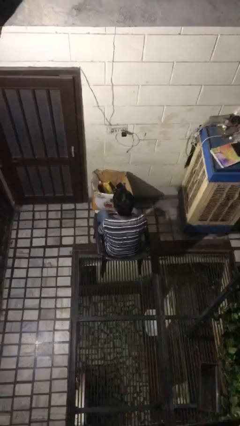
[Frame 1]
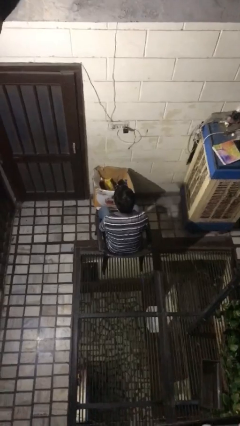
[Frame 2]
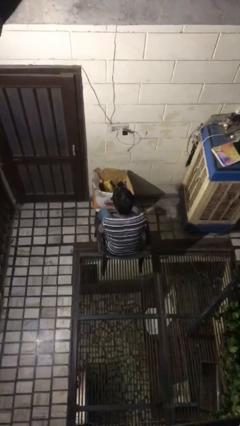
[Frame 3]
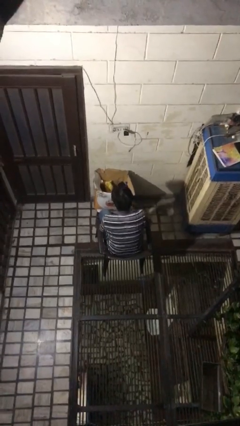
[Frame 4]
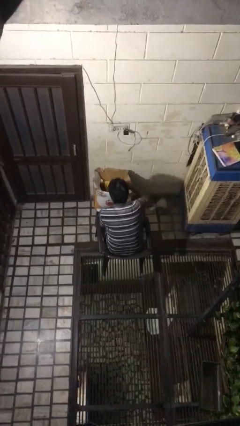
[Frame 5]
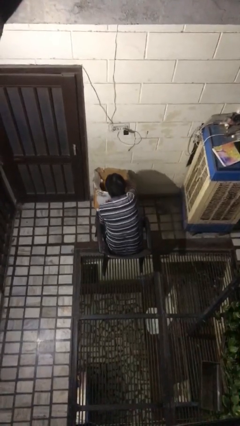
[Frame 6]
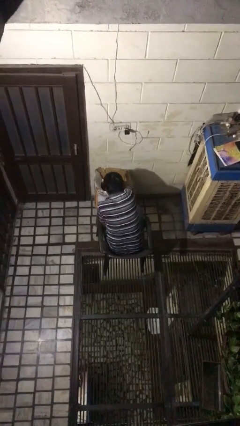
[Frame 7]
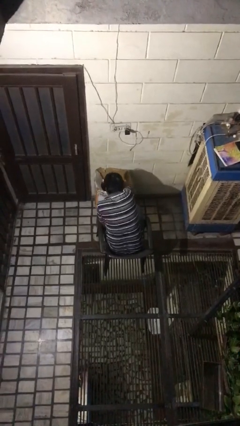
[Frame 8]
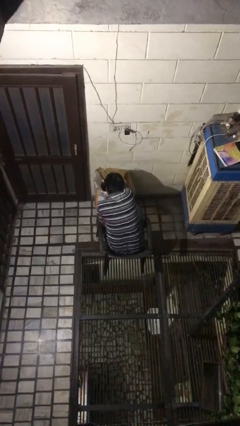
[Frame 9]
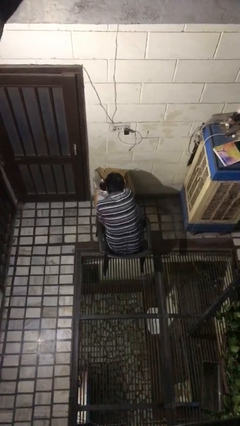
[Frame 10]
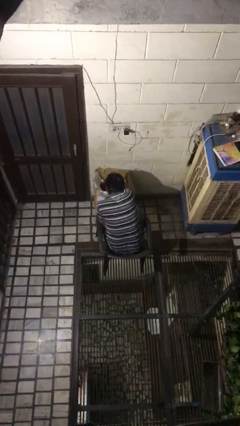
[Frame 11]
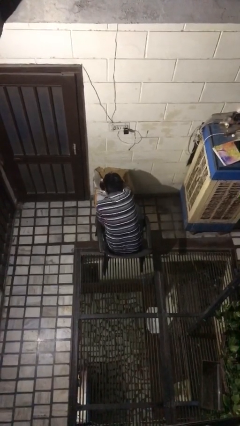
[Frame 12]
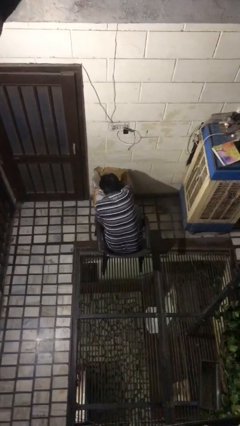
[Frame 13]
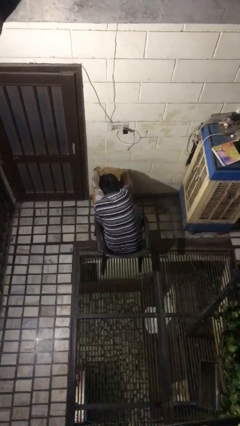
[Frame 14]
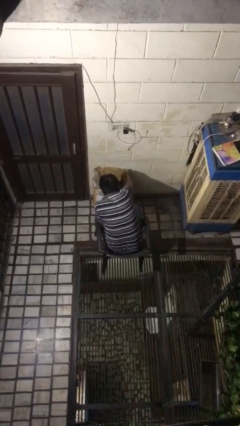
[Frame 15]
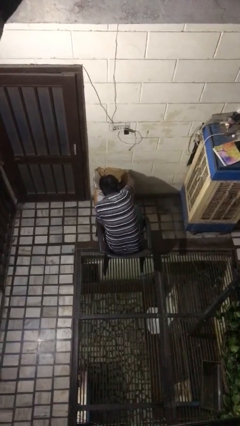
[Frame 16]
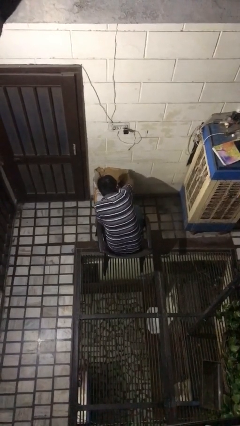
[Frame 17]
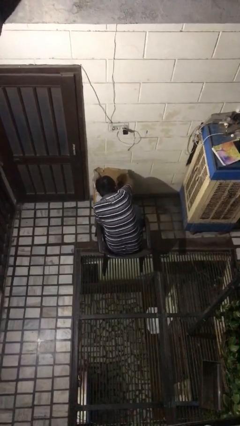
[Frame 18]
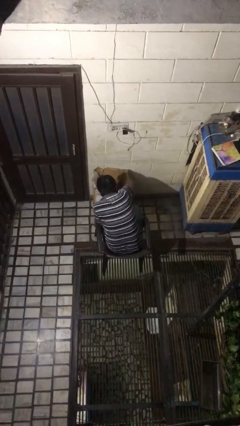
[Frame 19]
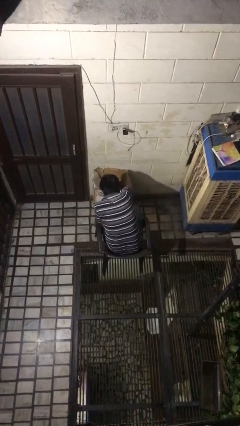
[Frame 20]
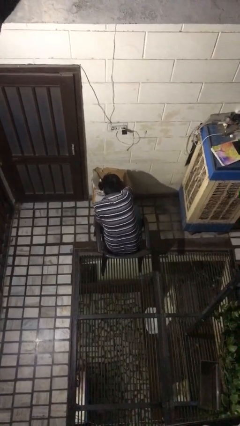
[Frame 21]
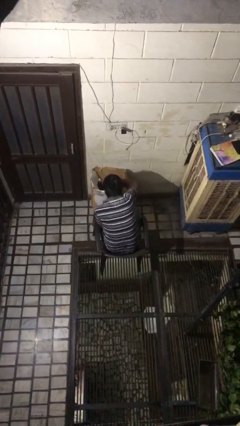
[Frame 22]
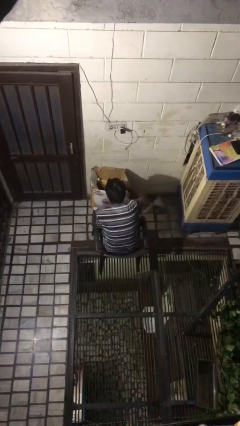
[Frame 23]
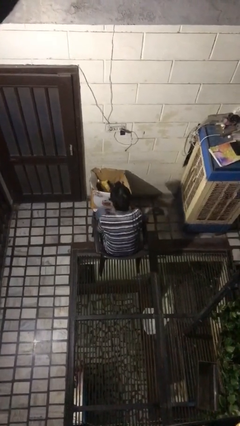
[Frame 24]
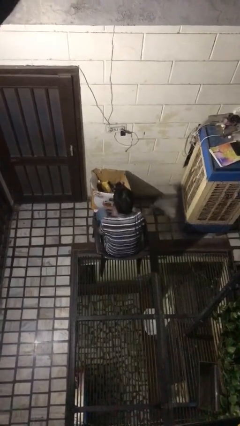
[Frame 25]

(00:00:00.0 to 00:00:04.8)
person searches in box

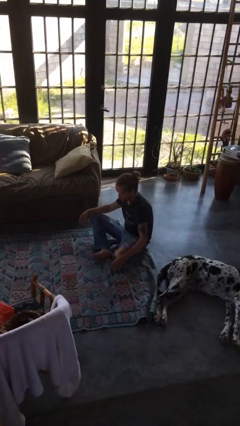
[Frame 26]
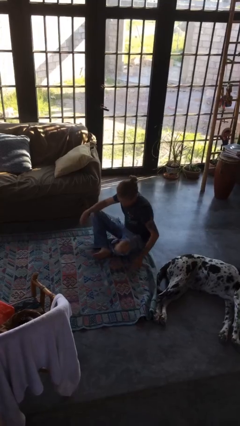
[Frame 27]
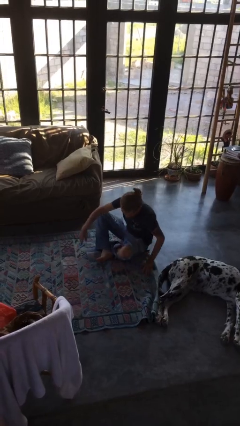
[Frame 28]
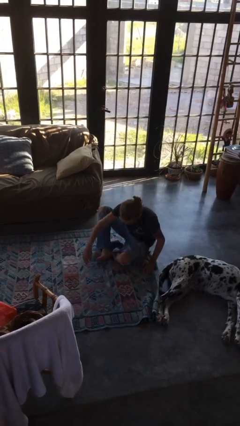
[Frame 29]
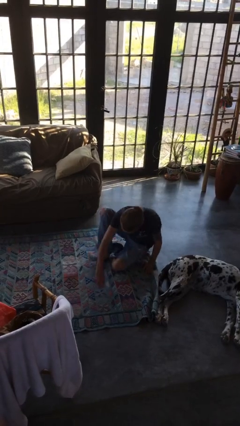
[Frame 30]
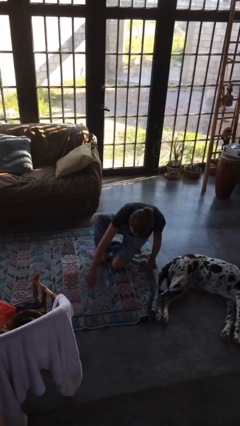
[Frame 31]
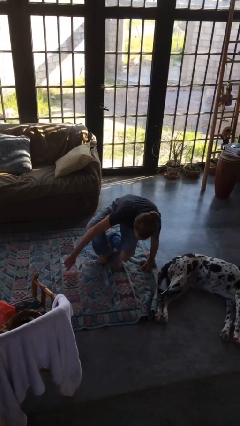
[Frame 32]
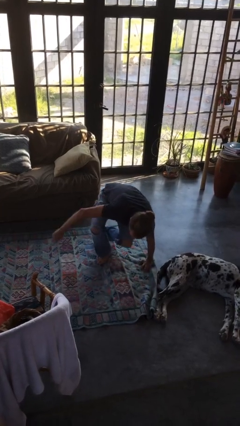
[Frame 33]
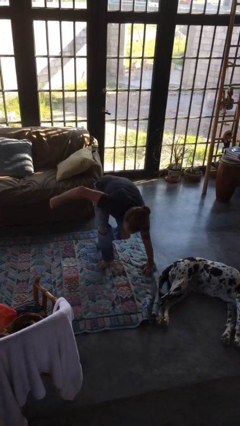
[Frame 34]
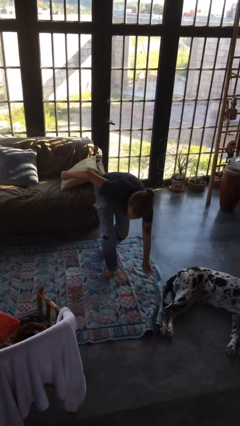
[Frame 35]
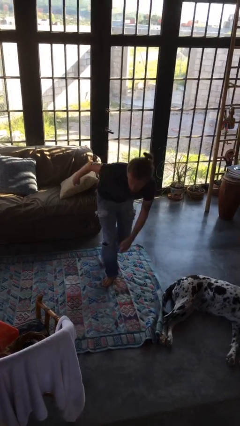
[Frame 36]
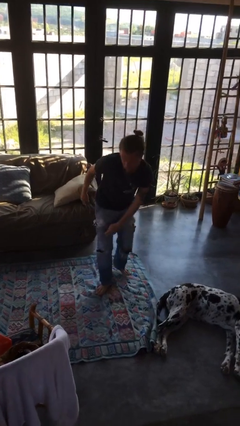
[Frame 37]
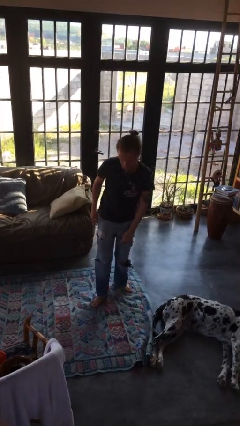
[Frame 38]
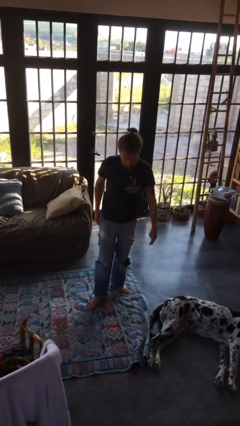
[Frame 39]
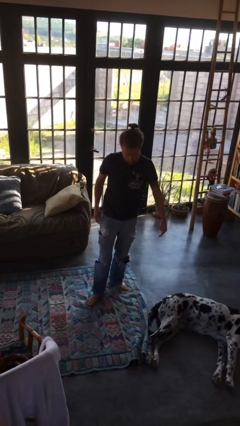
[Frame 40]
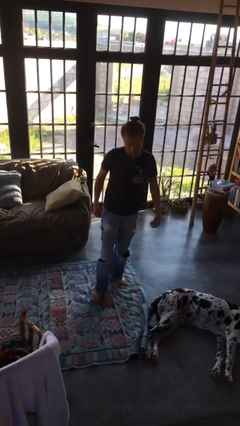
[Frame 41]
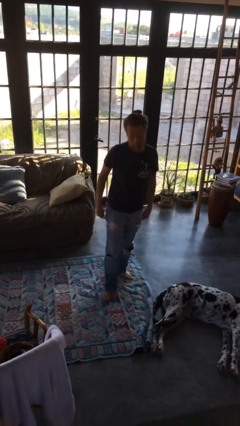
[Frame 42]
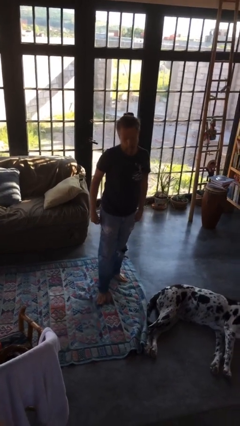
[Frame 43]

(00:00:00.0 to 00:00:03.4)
person stands up from floor

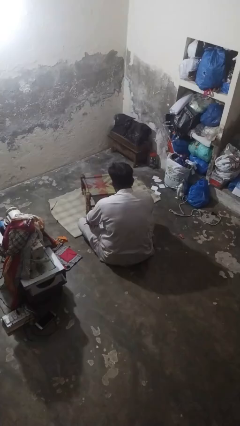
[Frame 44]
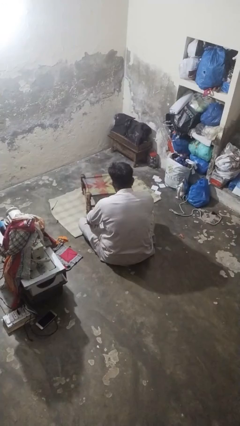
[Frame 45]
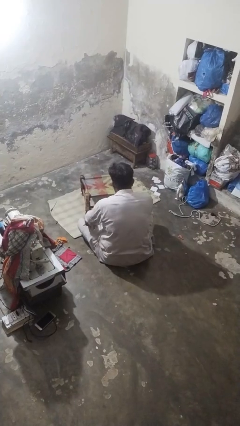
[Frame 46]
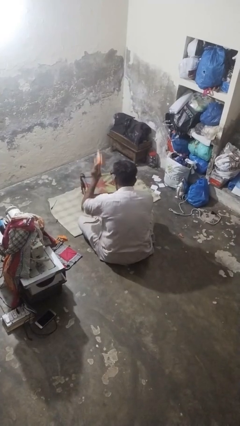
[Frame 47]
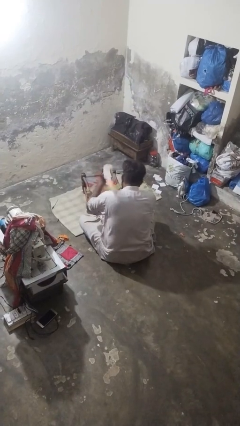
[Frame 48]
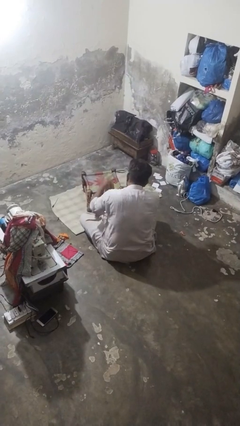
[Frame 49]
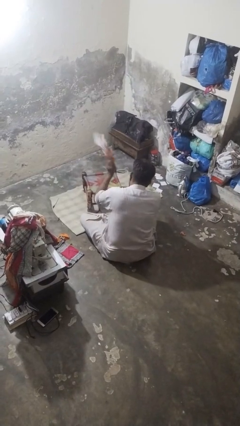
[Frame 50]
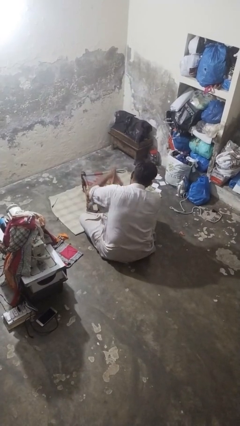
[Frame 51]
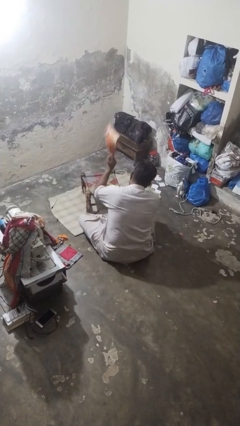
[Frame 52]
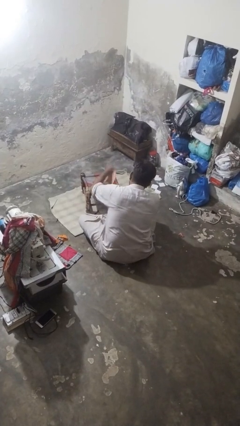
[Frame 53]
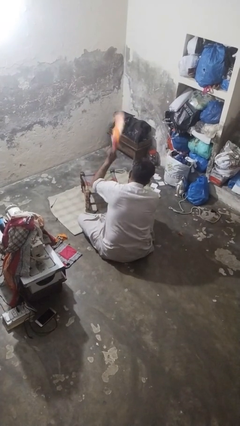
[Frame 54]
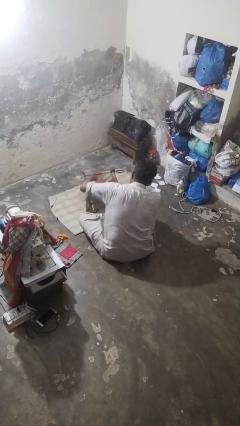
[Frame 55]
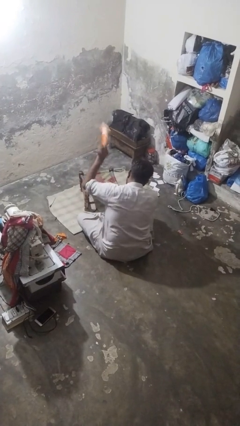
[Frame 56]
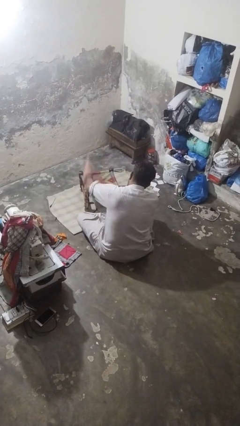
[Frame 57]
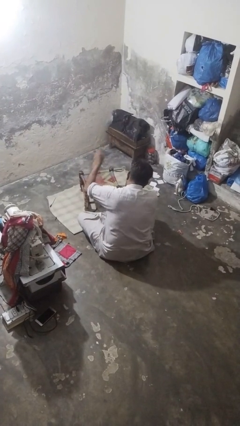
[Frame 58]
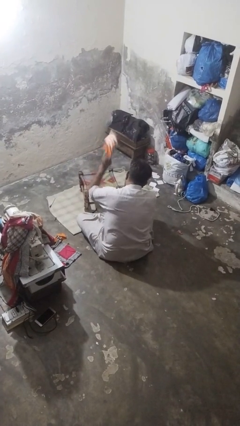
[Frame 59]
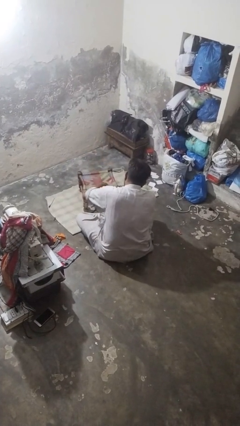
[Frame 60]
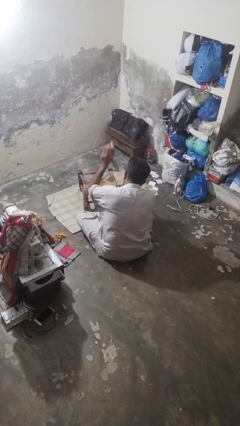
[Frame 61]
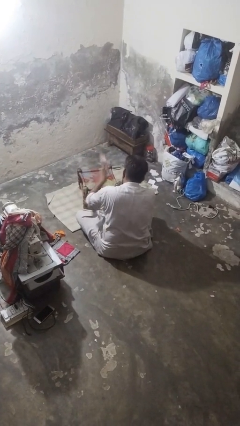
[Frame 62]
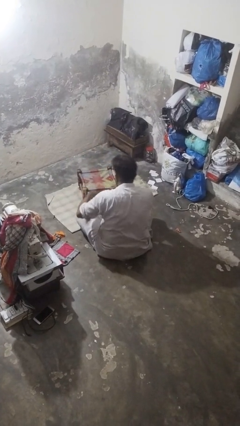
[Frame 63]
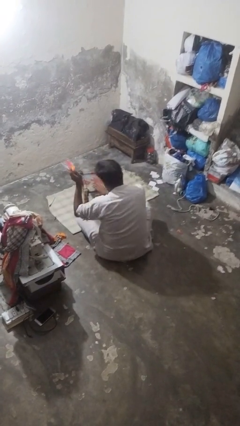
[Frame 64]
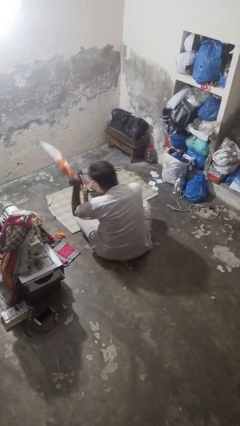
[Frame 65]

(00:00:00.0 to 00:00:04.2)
person dusts furniture

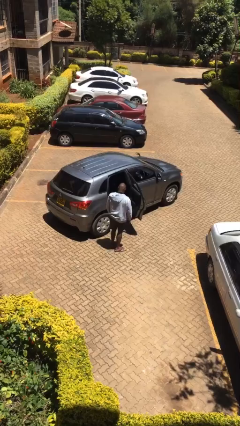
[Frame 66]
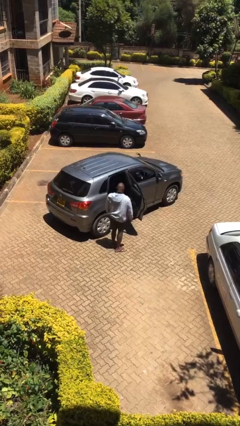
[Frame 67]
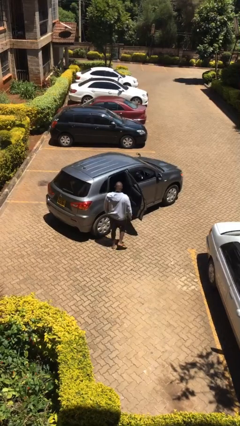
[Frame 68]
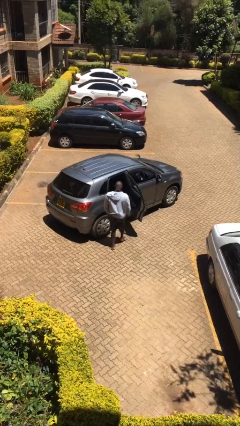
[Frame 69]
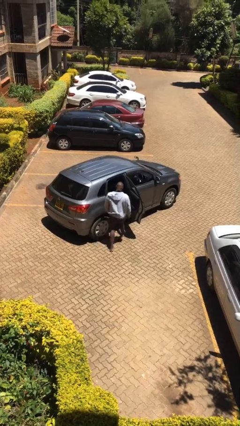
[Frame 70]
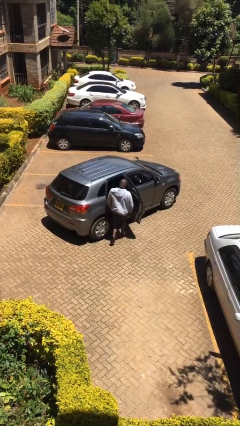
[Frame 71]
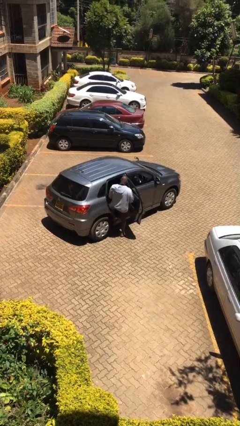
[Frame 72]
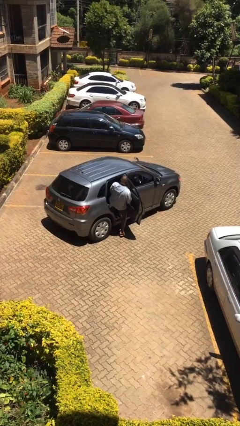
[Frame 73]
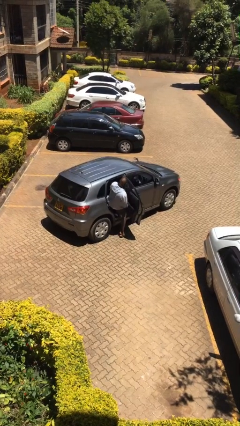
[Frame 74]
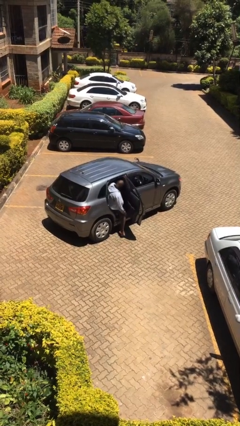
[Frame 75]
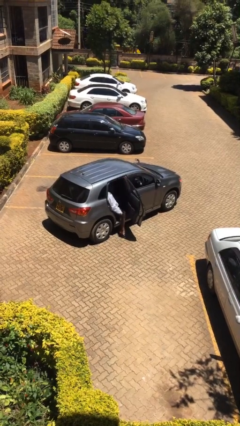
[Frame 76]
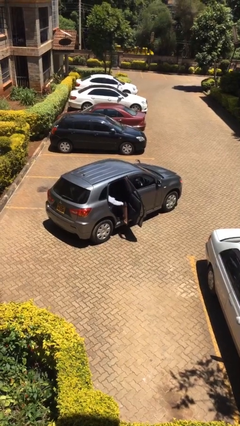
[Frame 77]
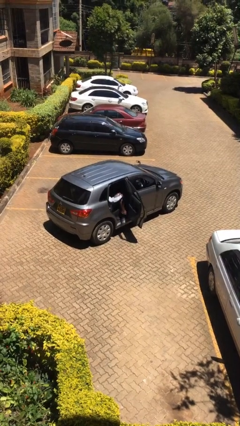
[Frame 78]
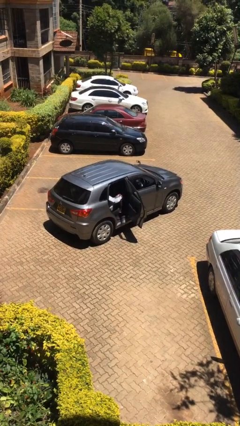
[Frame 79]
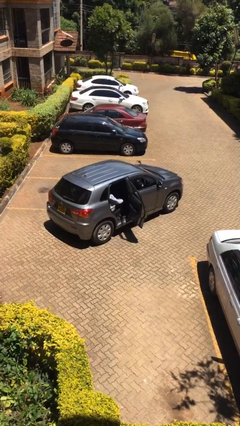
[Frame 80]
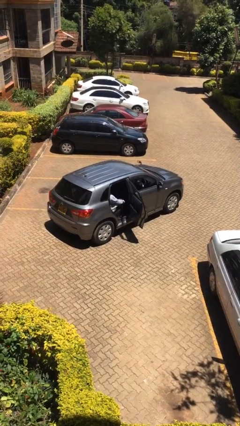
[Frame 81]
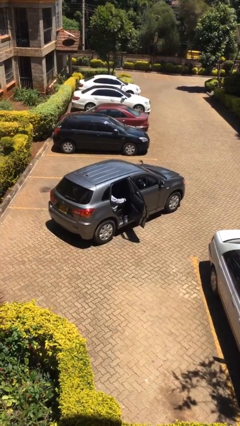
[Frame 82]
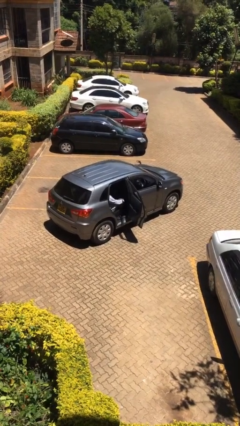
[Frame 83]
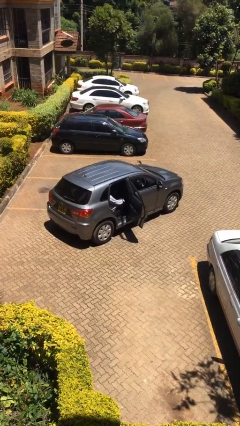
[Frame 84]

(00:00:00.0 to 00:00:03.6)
person enters car

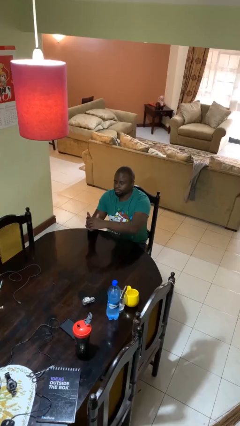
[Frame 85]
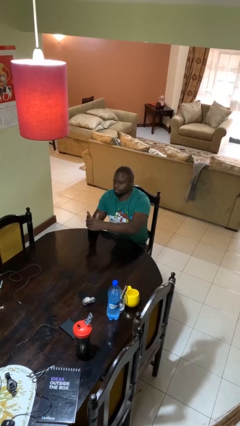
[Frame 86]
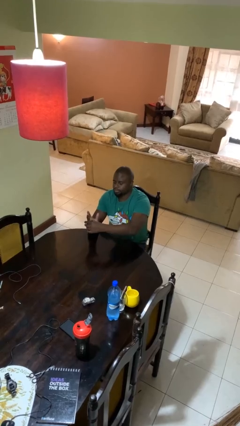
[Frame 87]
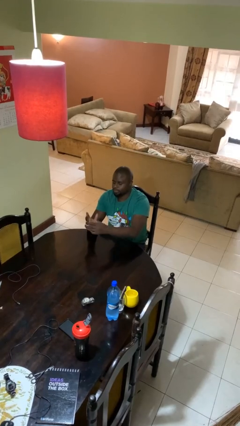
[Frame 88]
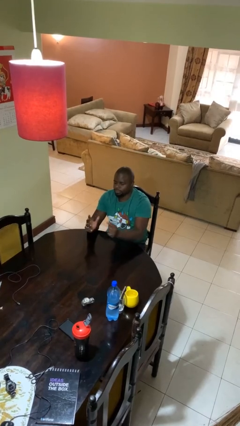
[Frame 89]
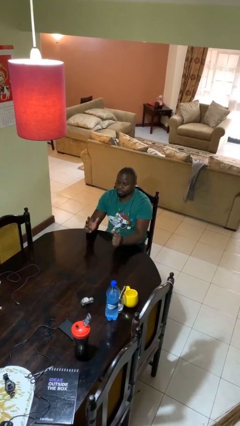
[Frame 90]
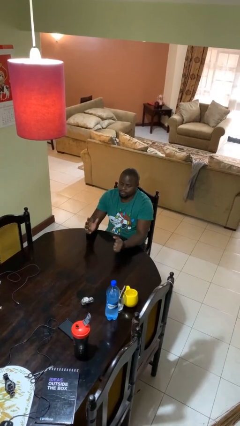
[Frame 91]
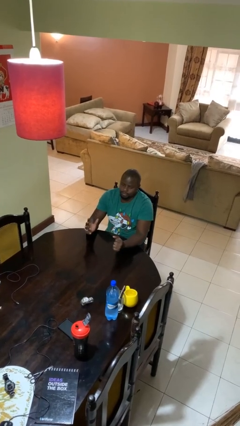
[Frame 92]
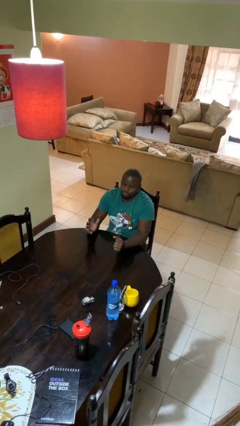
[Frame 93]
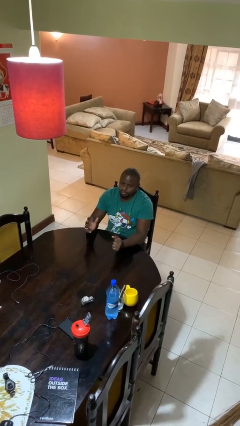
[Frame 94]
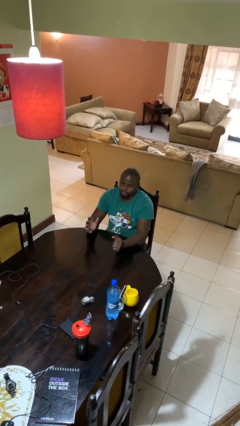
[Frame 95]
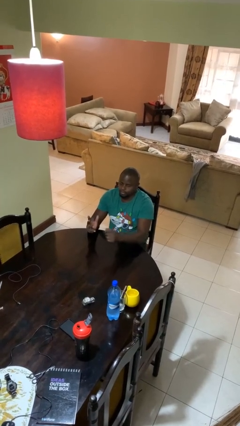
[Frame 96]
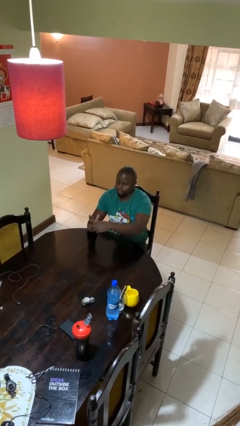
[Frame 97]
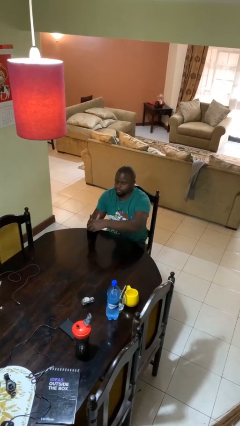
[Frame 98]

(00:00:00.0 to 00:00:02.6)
person puts on ring
